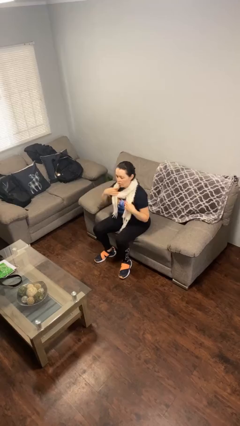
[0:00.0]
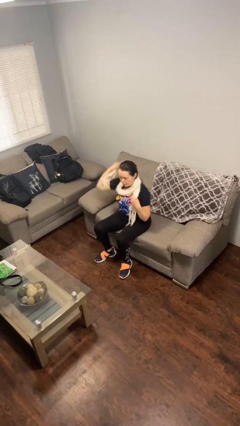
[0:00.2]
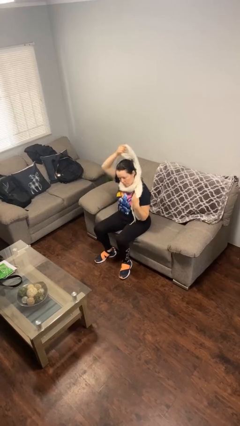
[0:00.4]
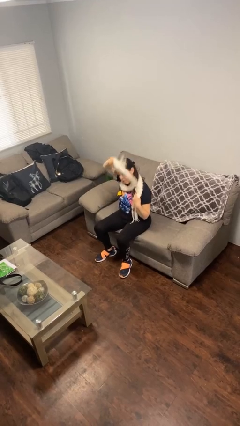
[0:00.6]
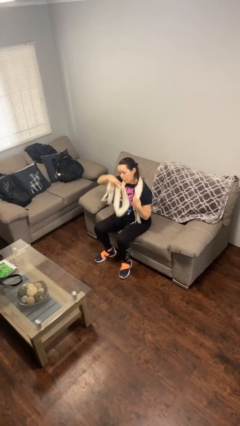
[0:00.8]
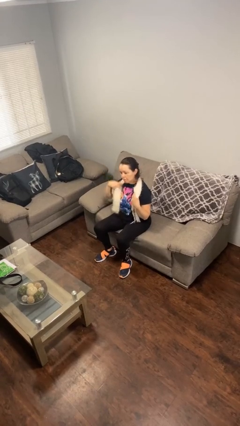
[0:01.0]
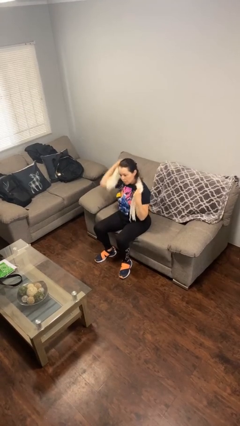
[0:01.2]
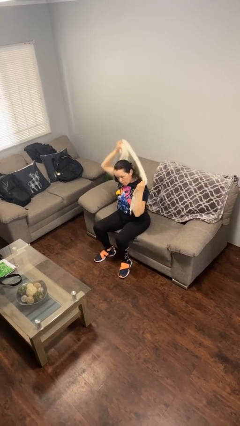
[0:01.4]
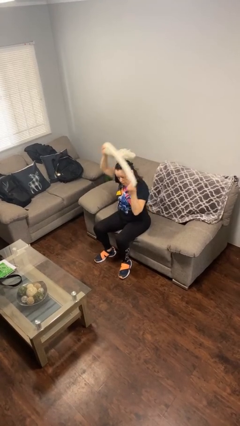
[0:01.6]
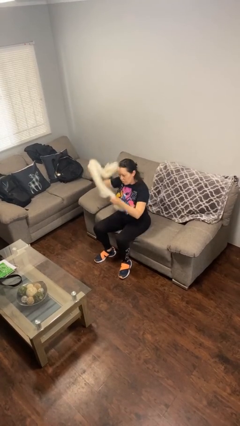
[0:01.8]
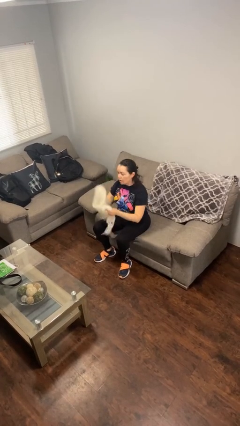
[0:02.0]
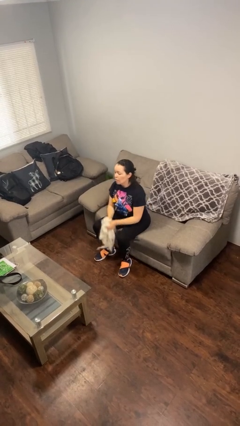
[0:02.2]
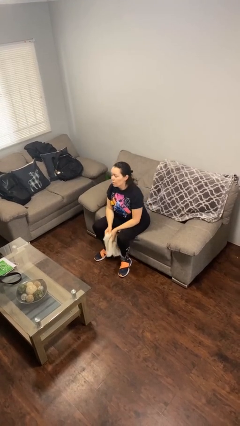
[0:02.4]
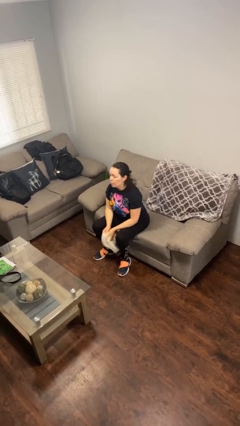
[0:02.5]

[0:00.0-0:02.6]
person takes off scarf

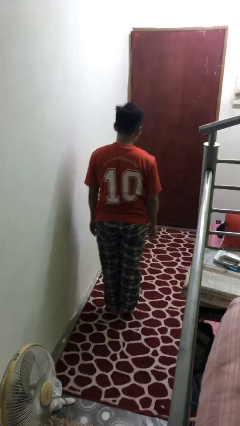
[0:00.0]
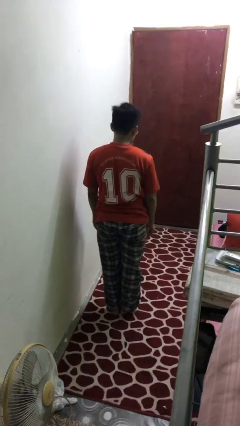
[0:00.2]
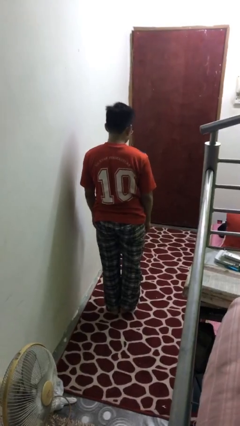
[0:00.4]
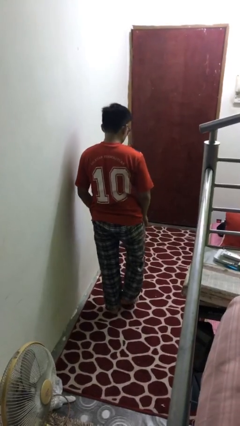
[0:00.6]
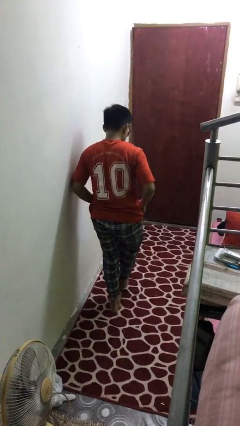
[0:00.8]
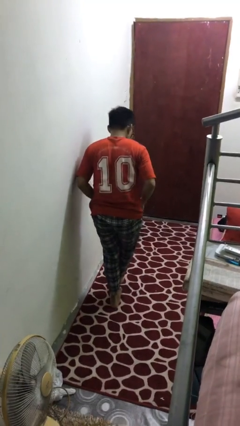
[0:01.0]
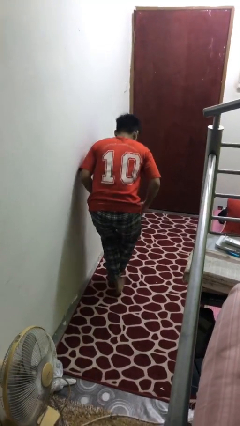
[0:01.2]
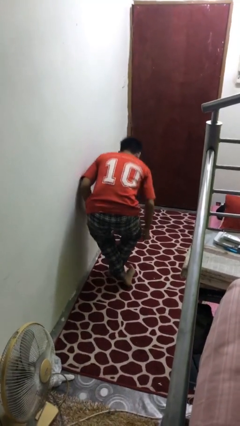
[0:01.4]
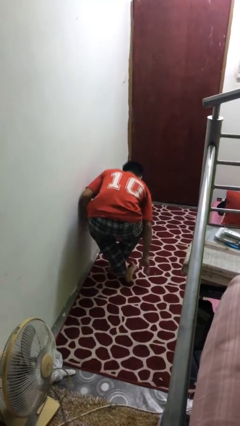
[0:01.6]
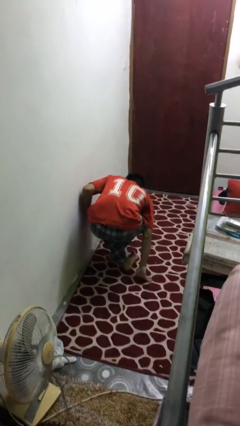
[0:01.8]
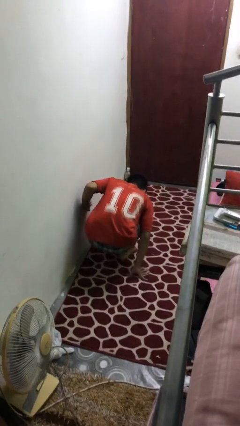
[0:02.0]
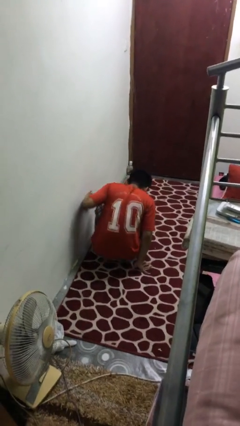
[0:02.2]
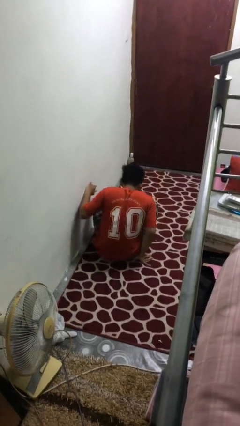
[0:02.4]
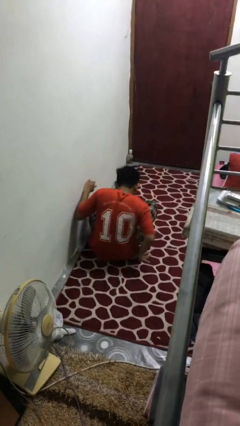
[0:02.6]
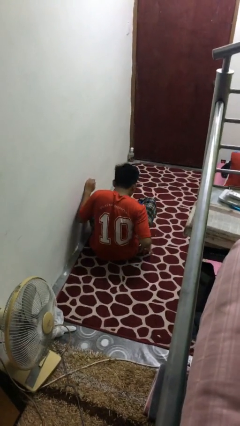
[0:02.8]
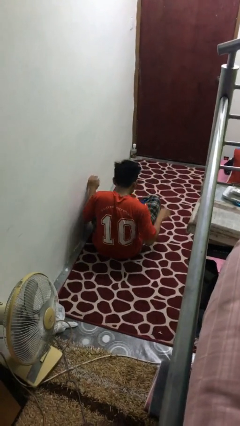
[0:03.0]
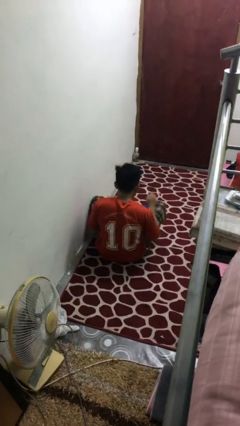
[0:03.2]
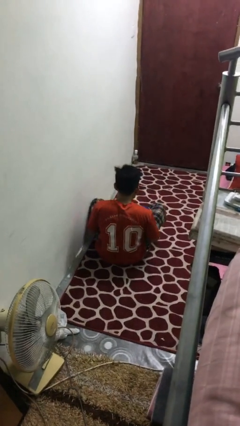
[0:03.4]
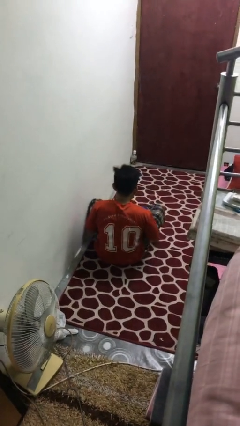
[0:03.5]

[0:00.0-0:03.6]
person sits crisscross

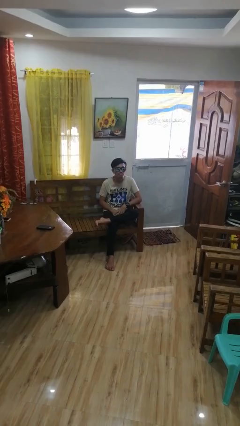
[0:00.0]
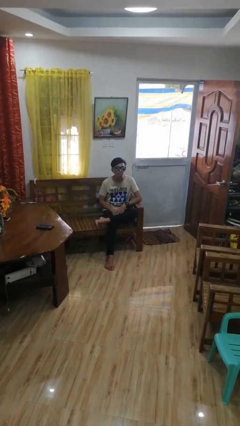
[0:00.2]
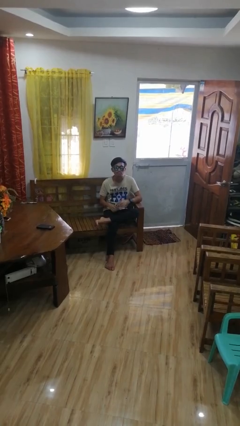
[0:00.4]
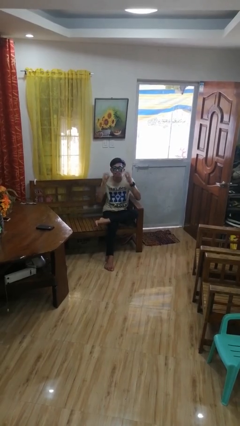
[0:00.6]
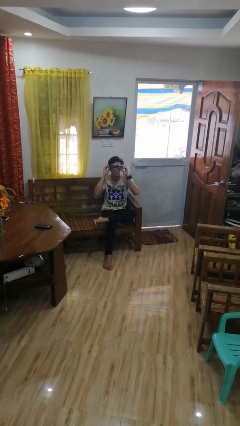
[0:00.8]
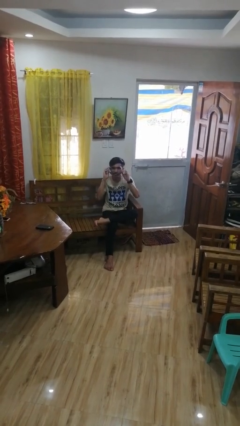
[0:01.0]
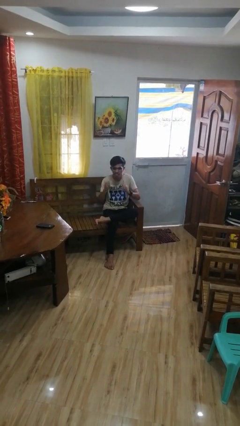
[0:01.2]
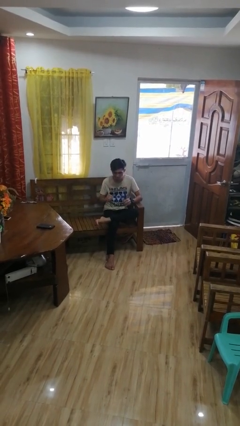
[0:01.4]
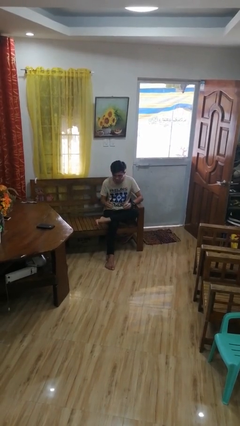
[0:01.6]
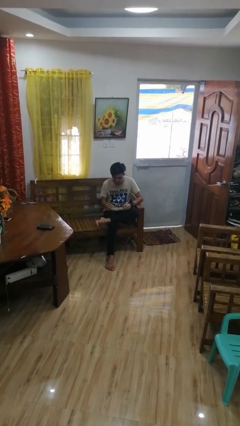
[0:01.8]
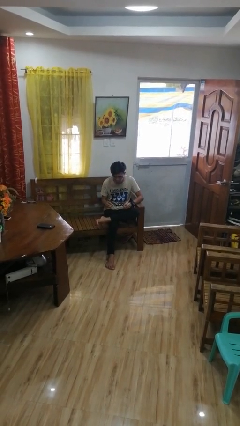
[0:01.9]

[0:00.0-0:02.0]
person takes off sunglasses

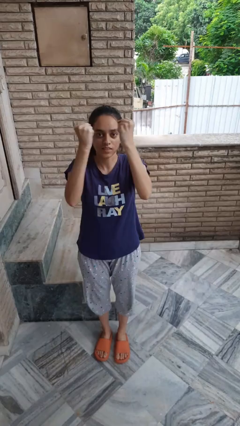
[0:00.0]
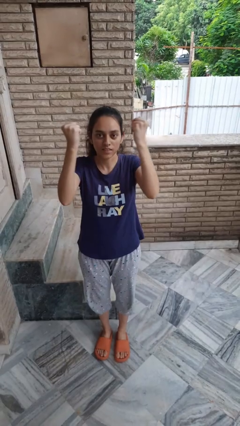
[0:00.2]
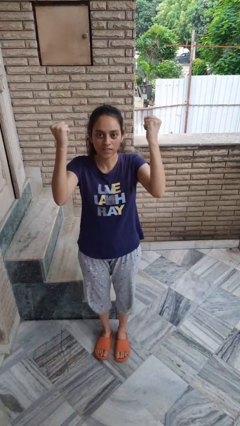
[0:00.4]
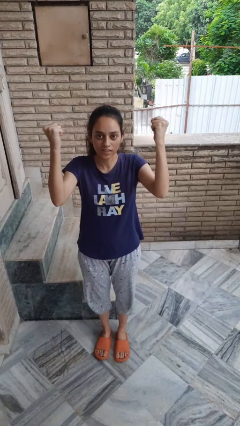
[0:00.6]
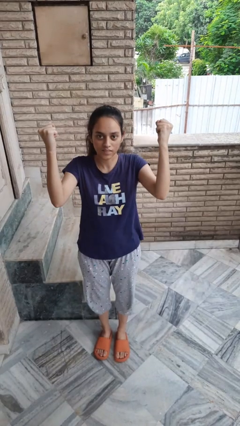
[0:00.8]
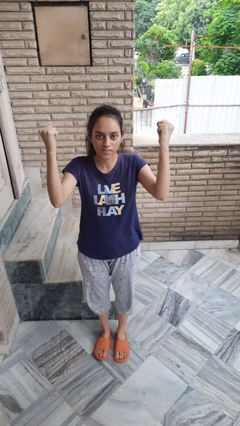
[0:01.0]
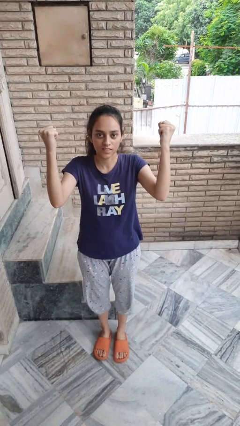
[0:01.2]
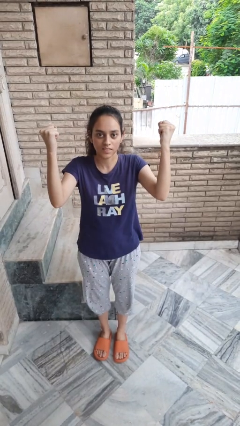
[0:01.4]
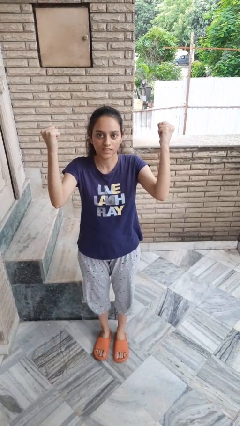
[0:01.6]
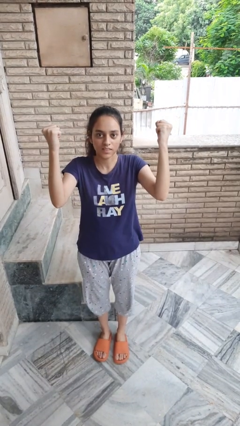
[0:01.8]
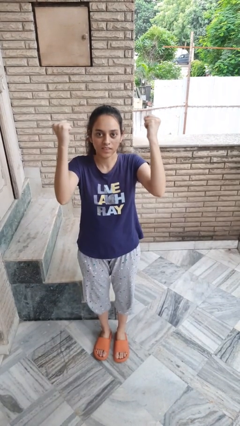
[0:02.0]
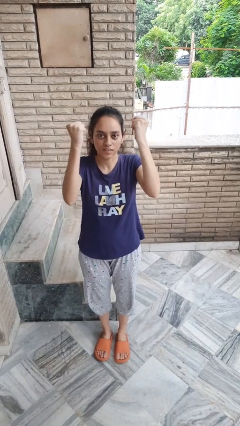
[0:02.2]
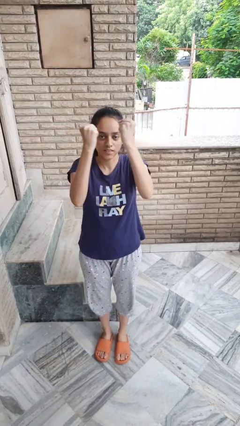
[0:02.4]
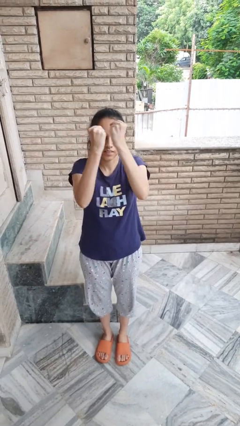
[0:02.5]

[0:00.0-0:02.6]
person gestures zoom out

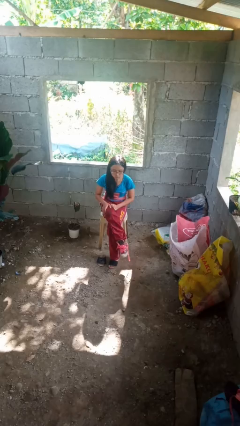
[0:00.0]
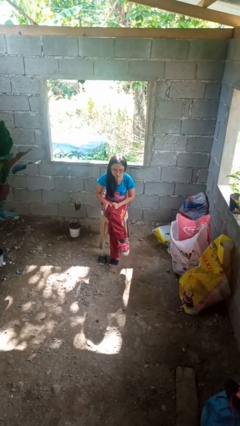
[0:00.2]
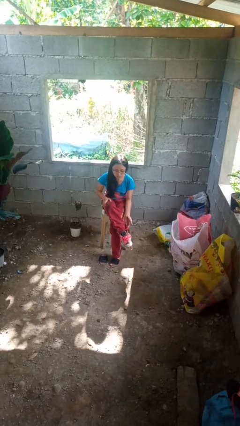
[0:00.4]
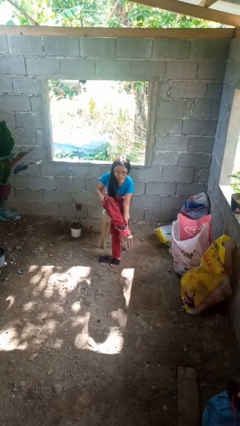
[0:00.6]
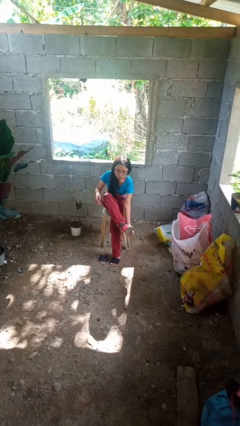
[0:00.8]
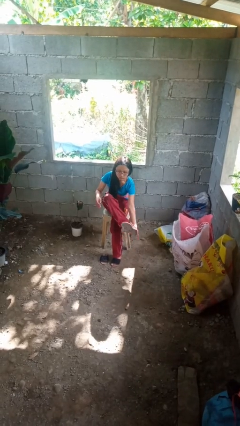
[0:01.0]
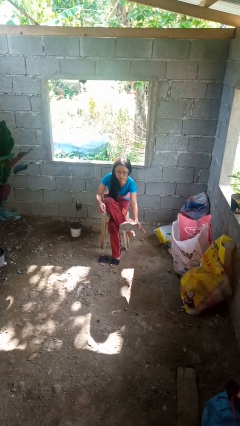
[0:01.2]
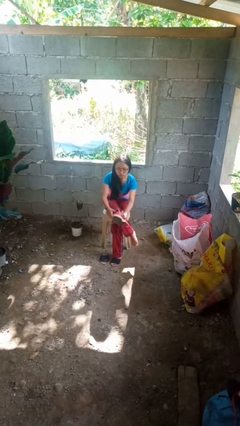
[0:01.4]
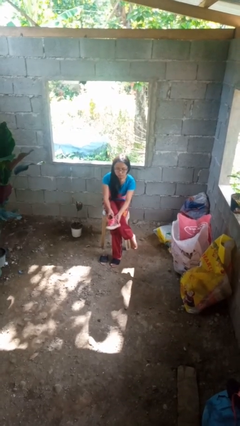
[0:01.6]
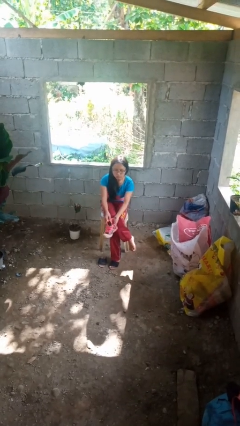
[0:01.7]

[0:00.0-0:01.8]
person takes off shoes

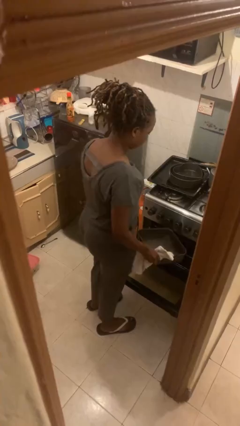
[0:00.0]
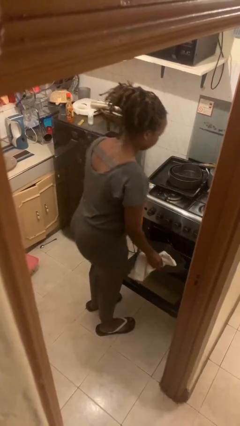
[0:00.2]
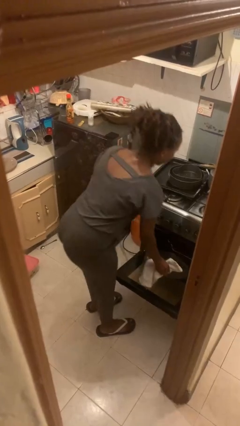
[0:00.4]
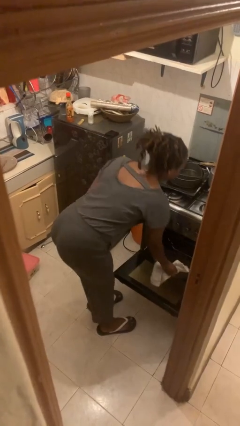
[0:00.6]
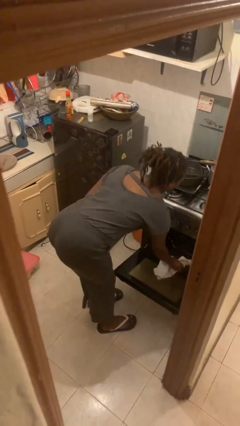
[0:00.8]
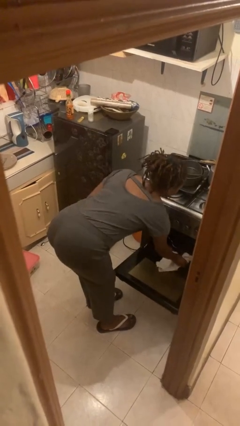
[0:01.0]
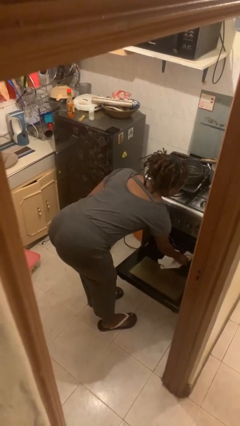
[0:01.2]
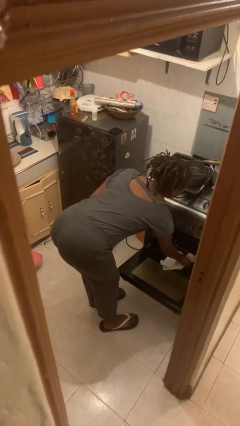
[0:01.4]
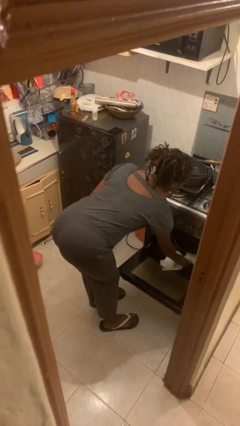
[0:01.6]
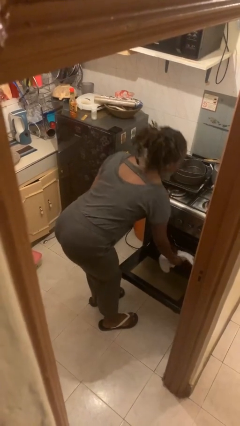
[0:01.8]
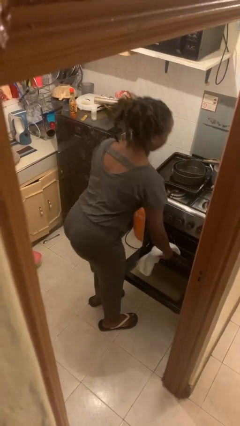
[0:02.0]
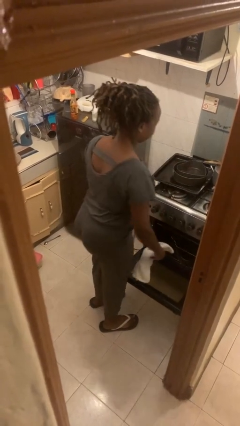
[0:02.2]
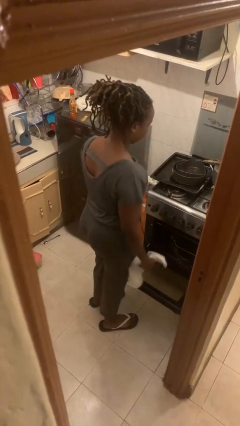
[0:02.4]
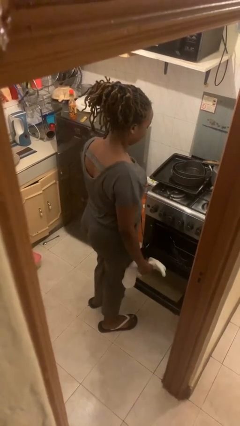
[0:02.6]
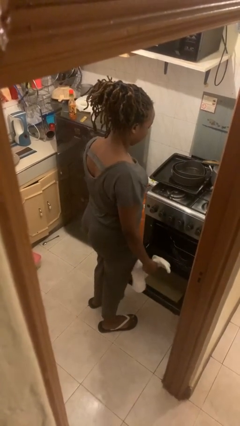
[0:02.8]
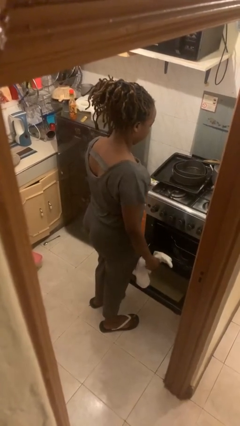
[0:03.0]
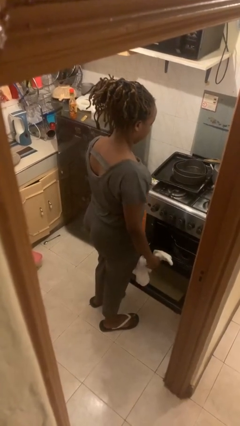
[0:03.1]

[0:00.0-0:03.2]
person puts object into oven

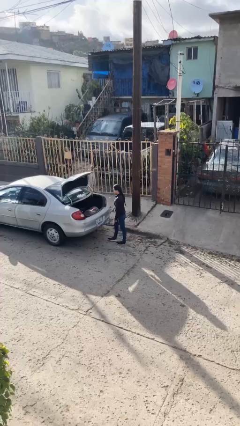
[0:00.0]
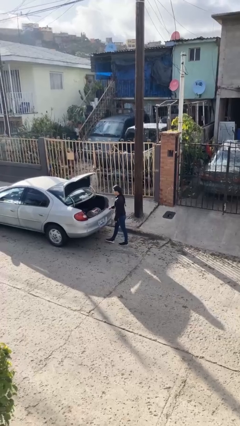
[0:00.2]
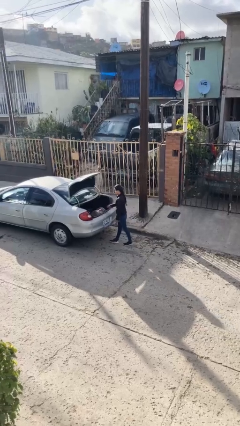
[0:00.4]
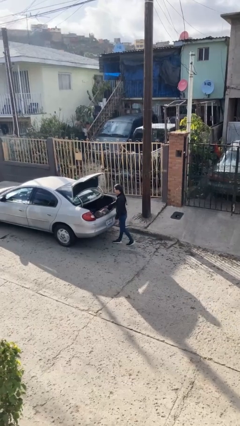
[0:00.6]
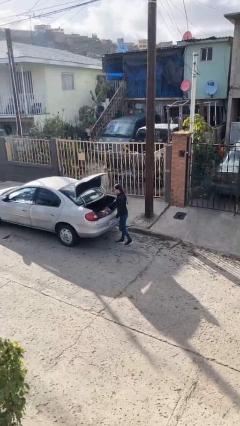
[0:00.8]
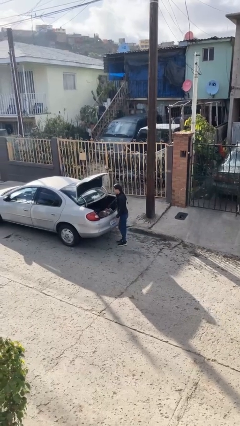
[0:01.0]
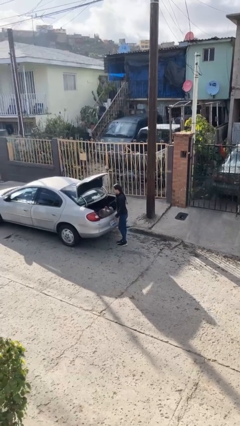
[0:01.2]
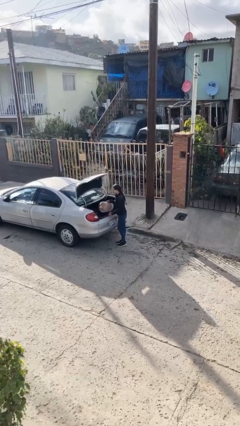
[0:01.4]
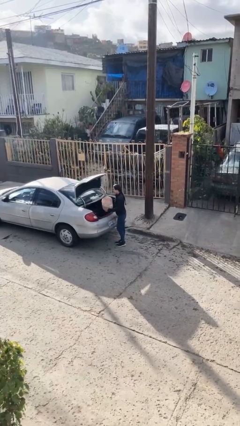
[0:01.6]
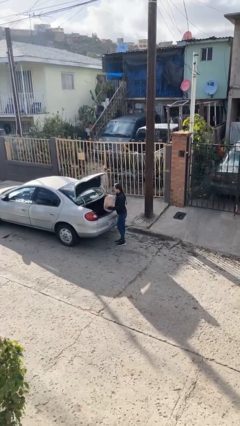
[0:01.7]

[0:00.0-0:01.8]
person unloads car
